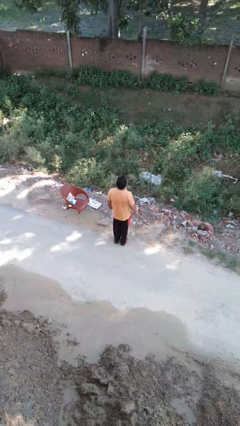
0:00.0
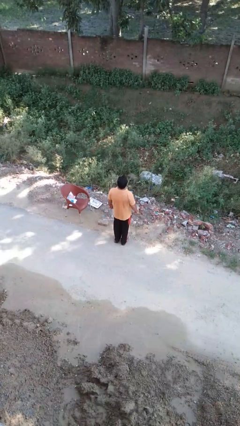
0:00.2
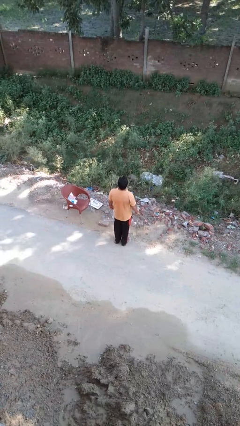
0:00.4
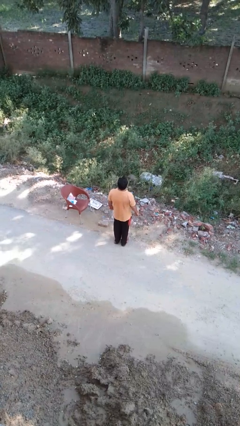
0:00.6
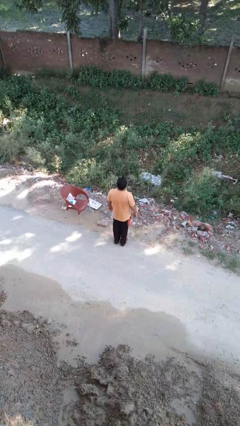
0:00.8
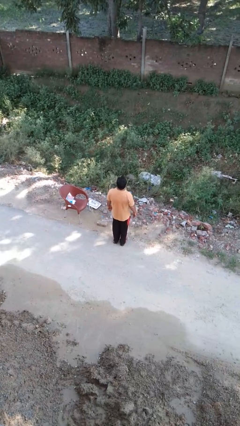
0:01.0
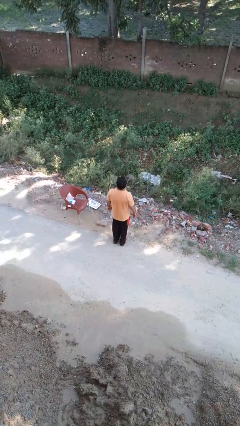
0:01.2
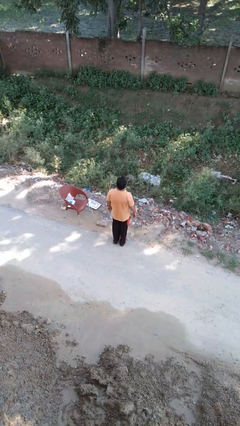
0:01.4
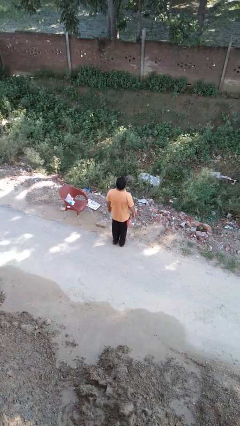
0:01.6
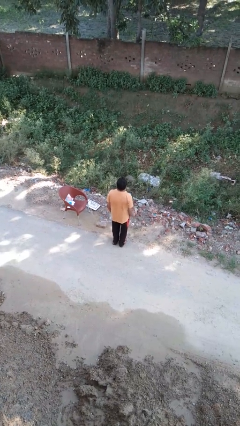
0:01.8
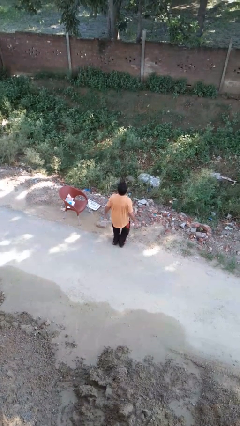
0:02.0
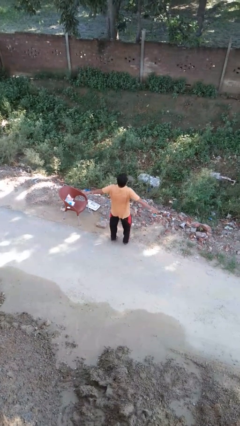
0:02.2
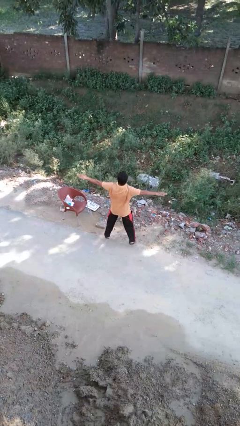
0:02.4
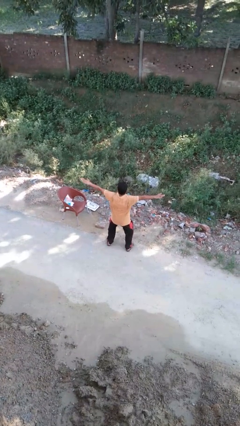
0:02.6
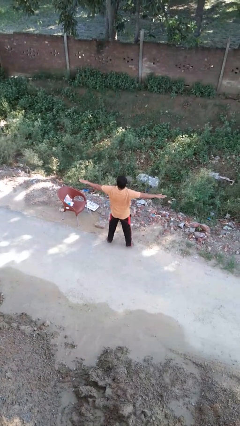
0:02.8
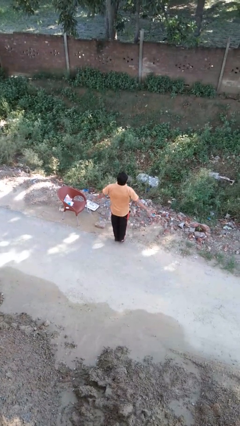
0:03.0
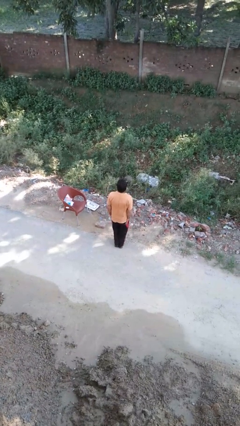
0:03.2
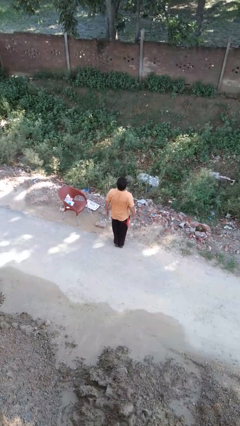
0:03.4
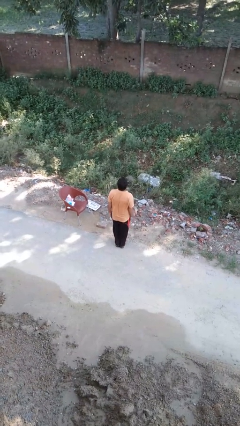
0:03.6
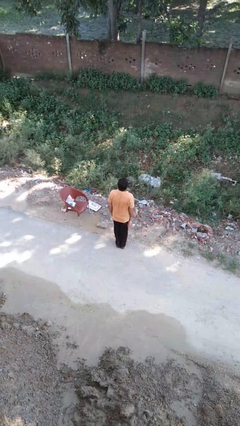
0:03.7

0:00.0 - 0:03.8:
person exercises with jumping jacks

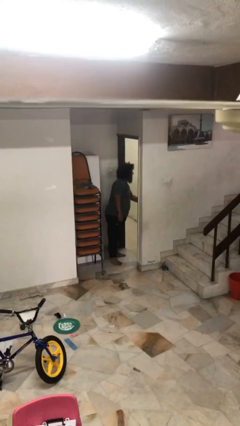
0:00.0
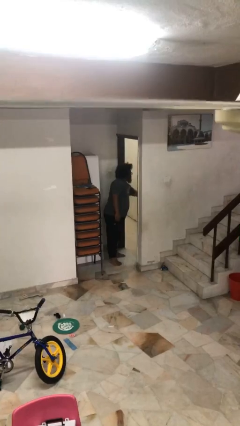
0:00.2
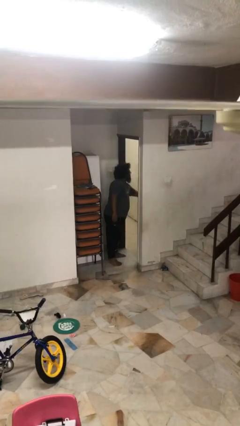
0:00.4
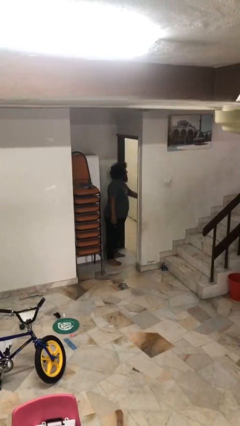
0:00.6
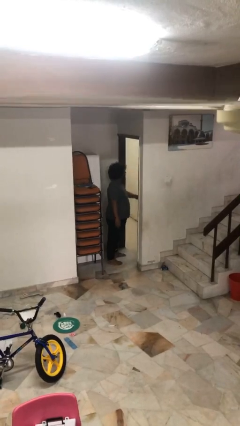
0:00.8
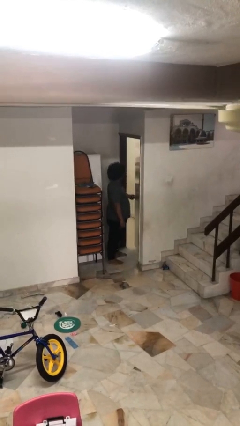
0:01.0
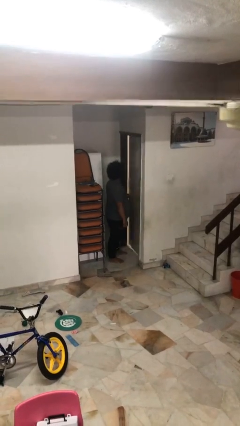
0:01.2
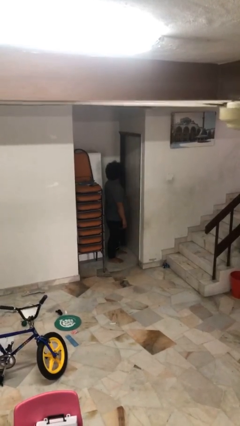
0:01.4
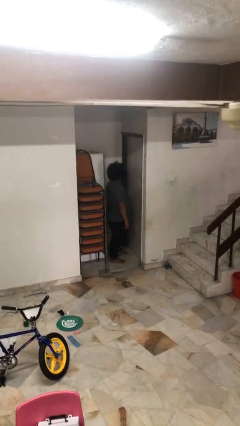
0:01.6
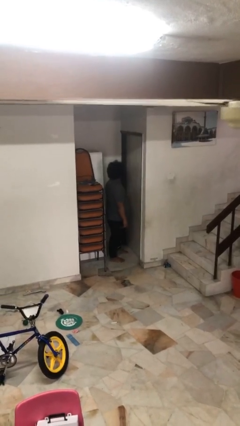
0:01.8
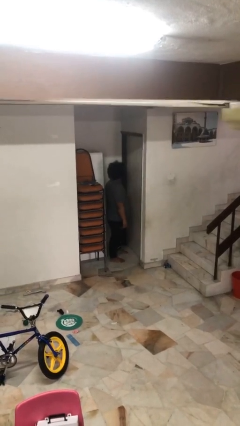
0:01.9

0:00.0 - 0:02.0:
person closes facility door

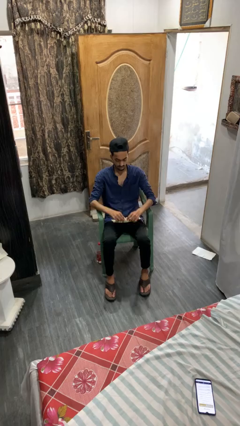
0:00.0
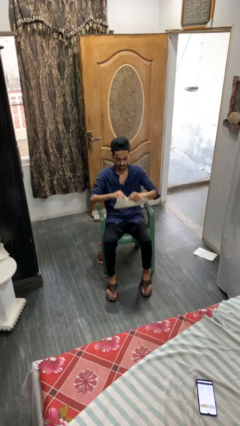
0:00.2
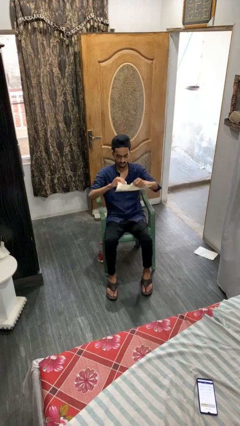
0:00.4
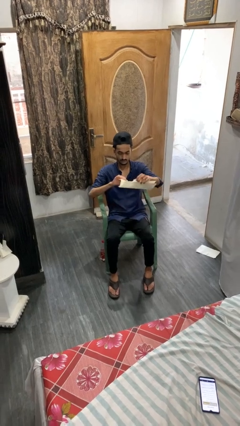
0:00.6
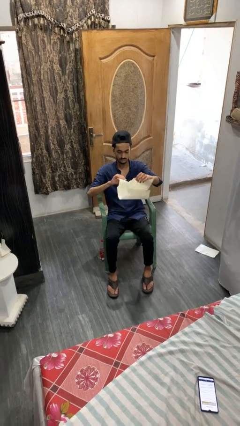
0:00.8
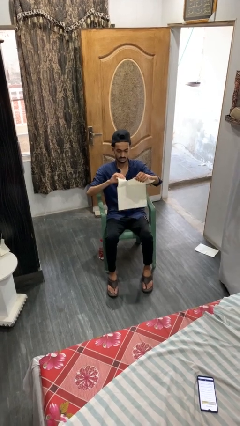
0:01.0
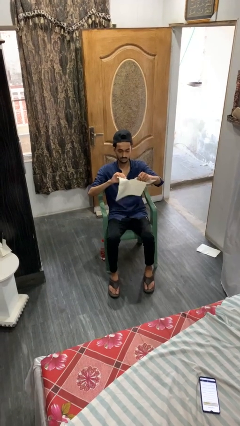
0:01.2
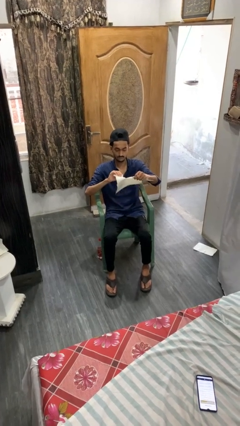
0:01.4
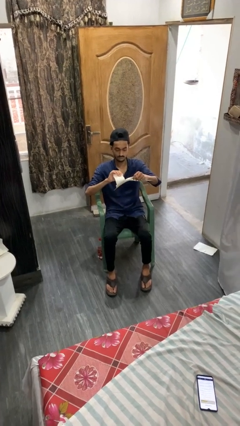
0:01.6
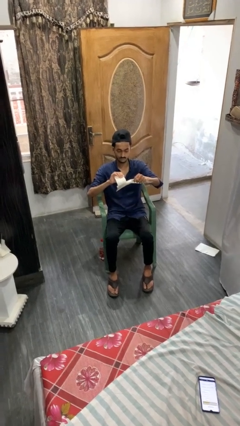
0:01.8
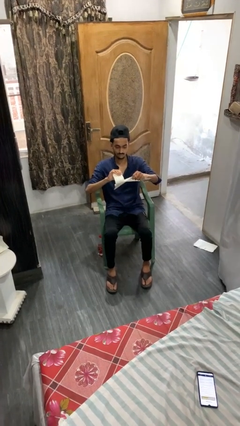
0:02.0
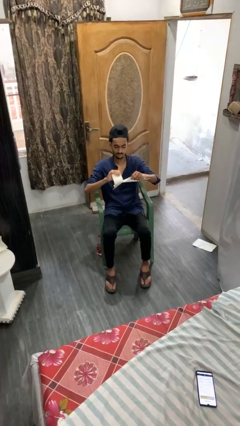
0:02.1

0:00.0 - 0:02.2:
person tears paper

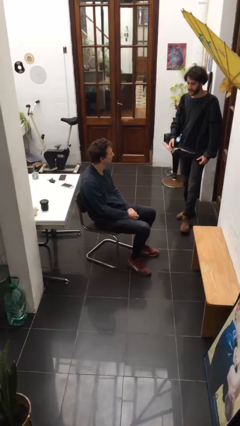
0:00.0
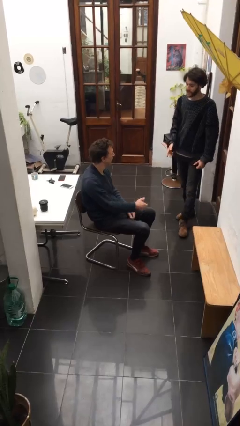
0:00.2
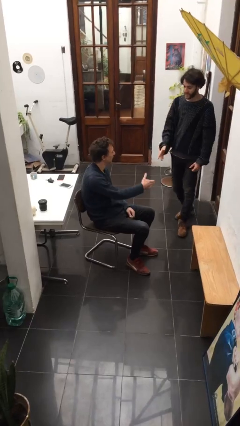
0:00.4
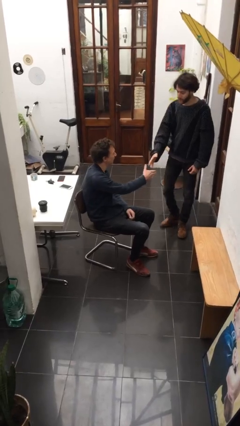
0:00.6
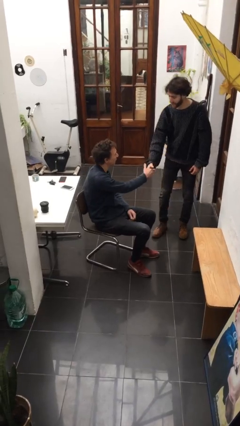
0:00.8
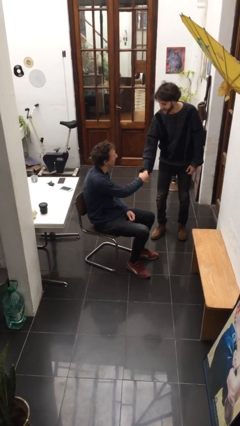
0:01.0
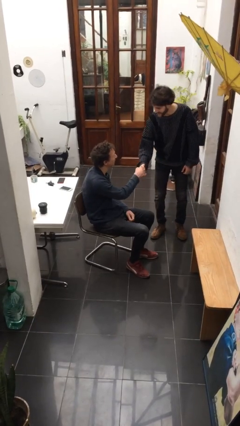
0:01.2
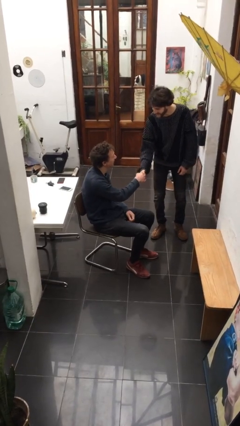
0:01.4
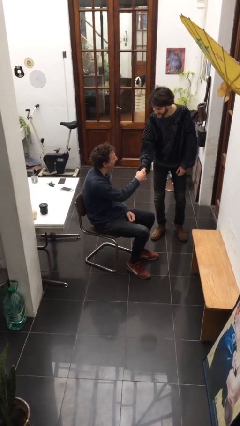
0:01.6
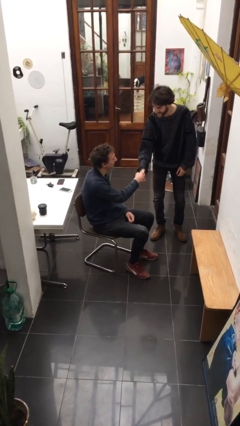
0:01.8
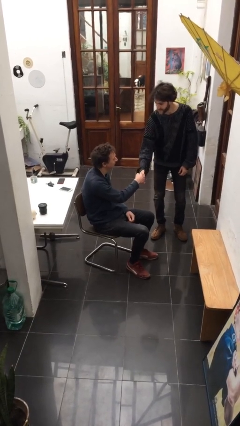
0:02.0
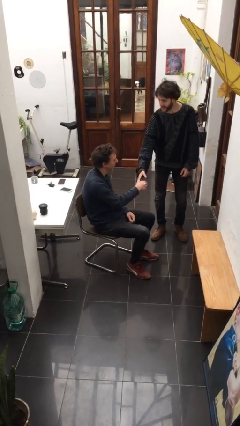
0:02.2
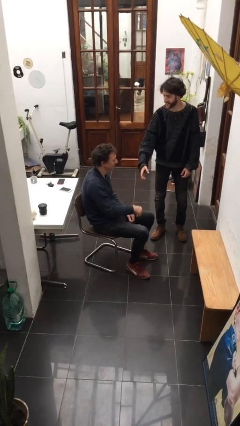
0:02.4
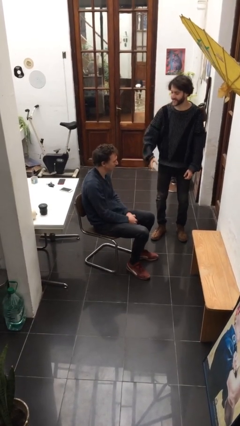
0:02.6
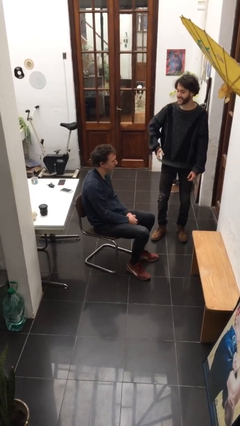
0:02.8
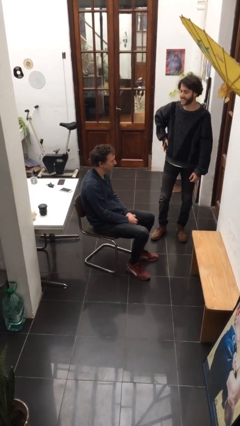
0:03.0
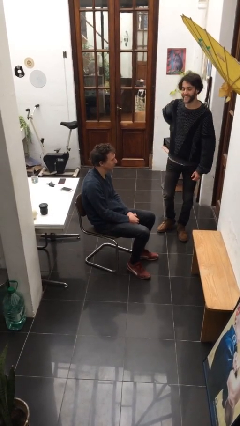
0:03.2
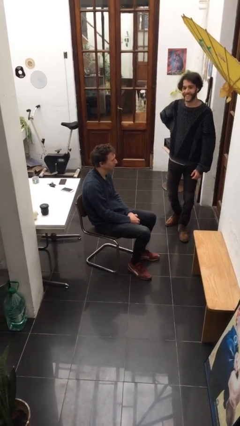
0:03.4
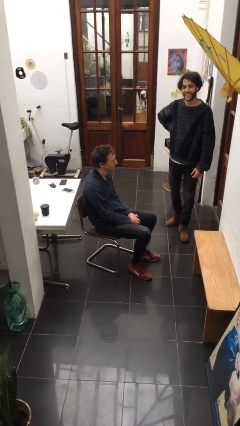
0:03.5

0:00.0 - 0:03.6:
person shakes hand

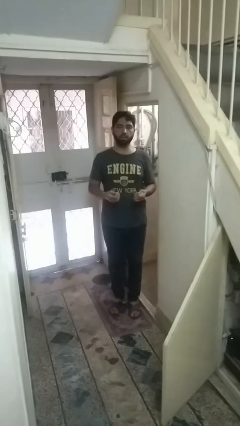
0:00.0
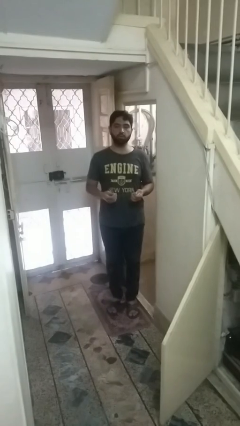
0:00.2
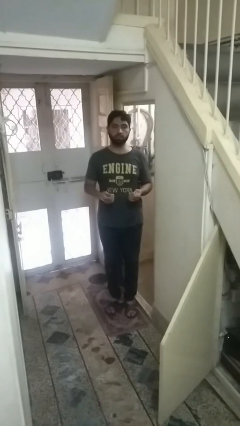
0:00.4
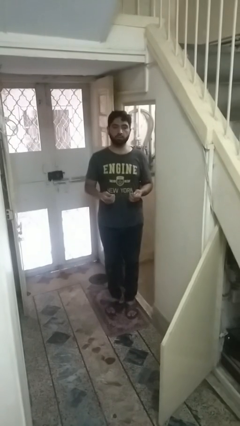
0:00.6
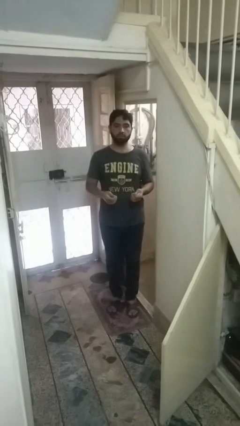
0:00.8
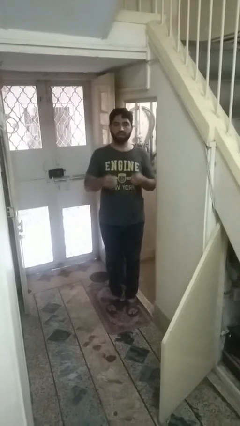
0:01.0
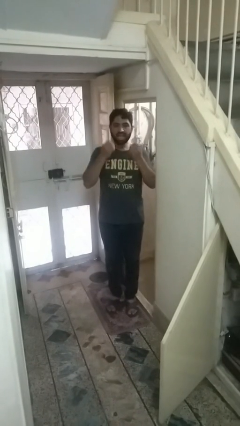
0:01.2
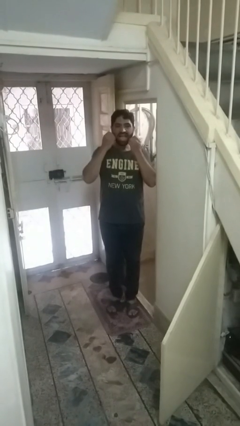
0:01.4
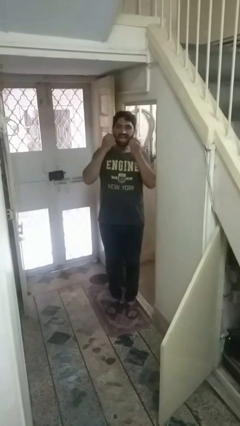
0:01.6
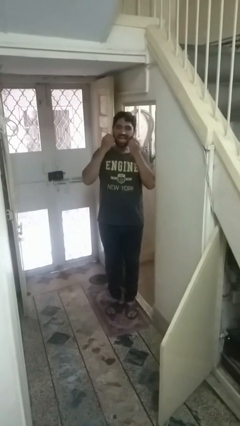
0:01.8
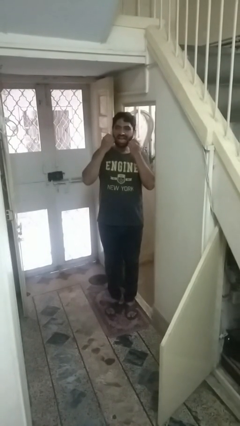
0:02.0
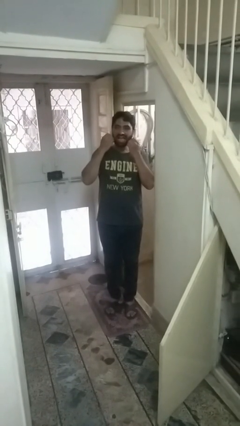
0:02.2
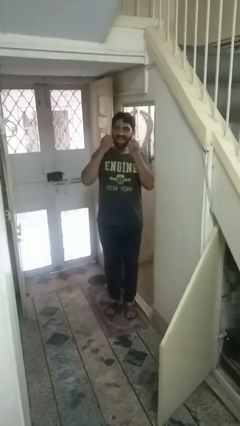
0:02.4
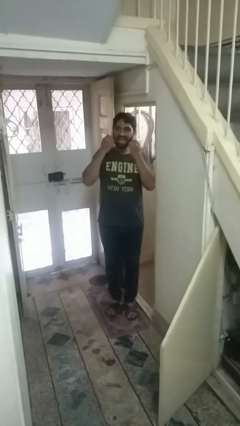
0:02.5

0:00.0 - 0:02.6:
person flosses

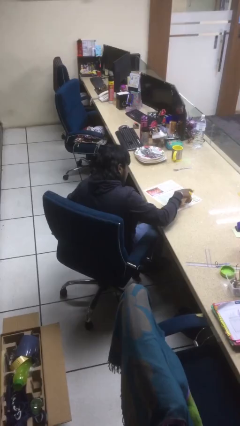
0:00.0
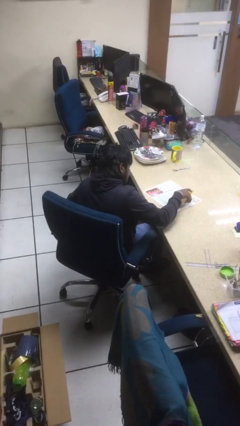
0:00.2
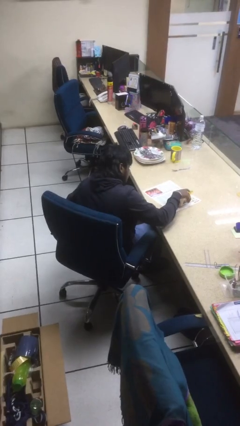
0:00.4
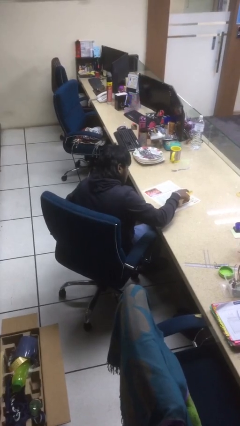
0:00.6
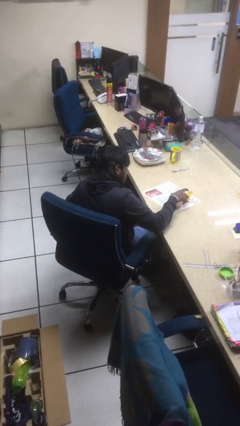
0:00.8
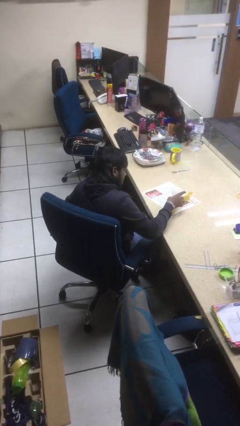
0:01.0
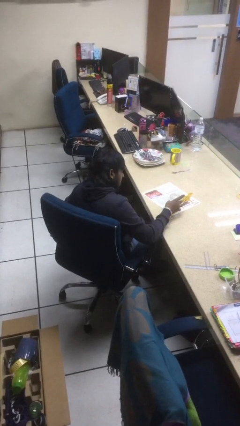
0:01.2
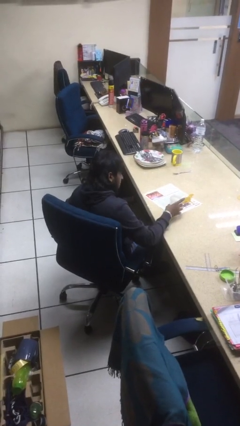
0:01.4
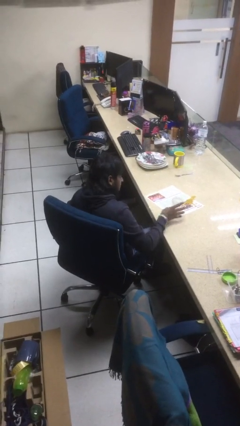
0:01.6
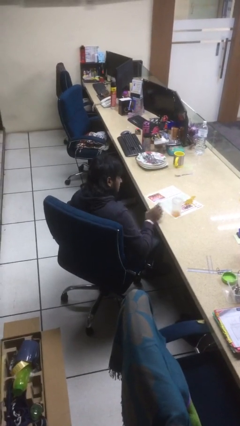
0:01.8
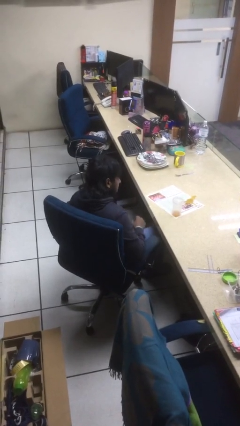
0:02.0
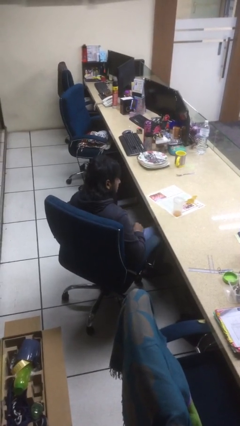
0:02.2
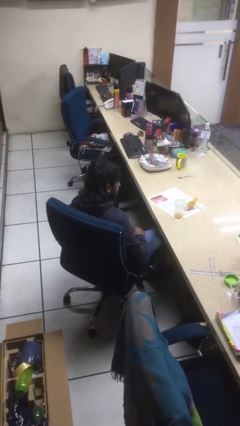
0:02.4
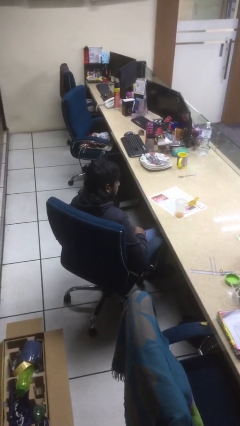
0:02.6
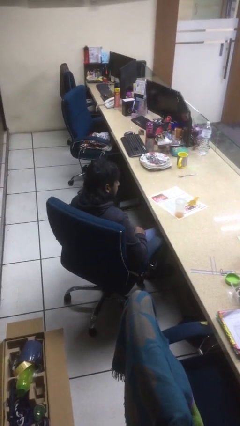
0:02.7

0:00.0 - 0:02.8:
person sets upright glass
